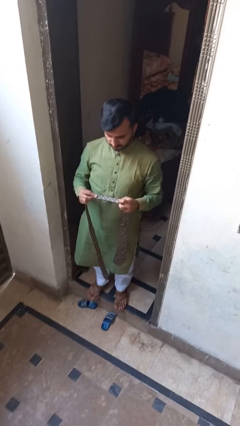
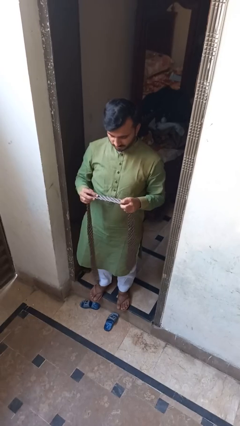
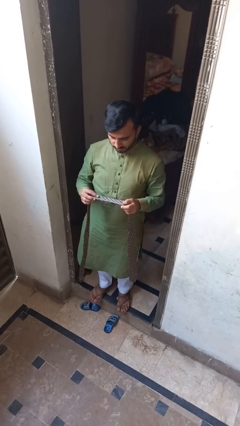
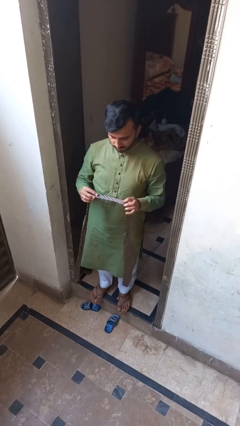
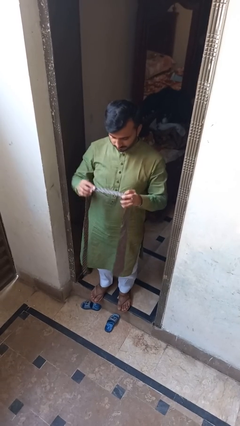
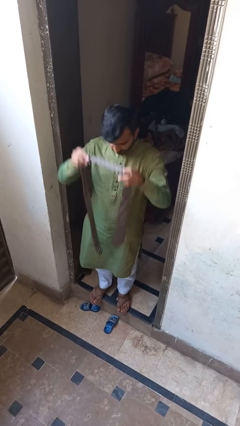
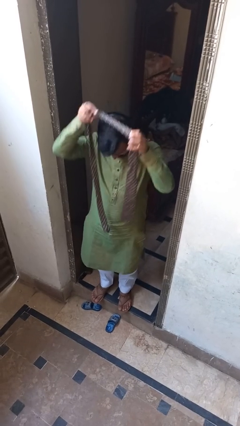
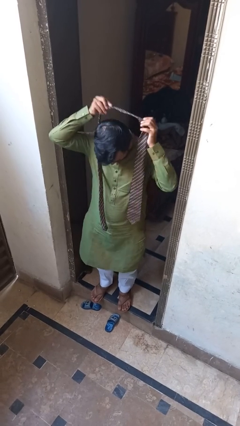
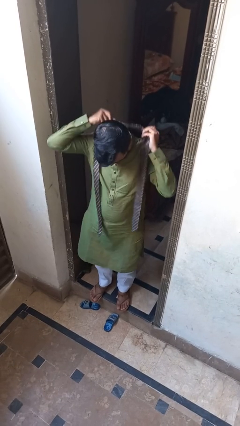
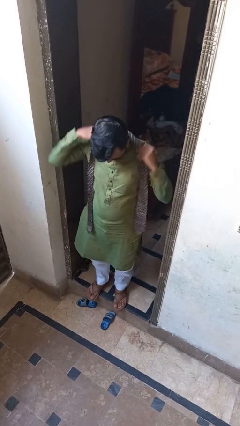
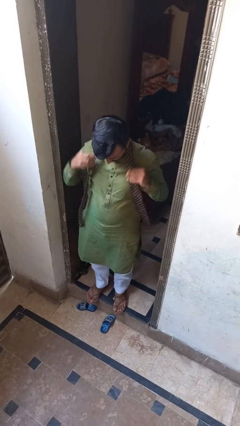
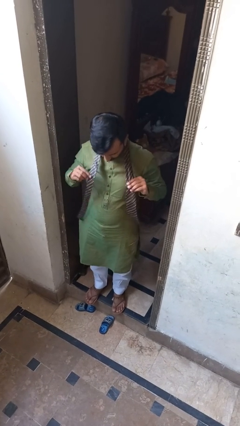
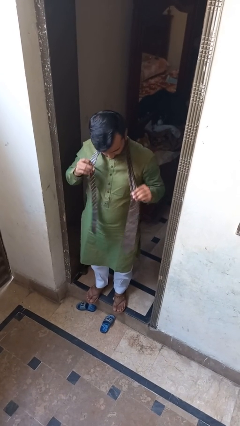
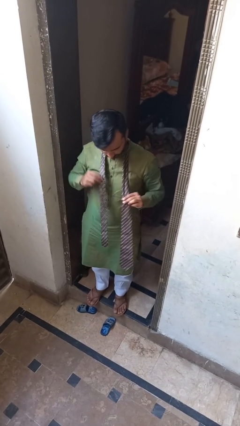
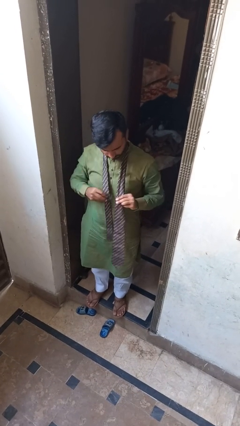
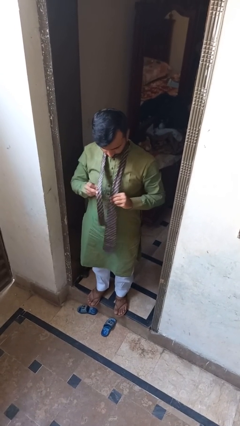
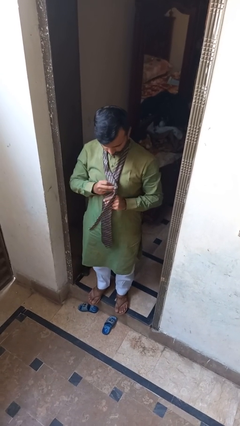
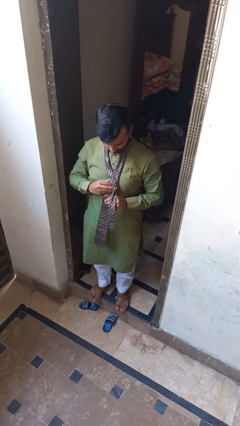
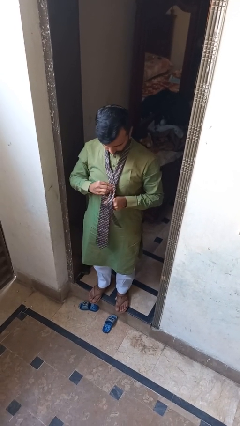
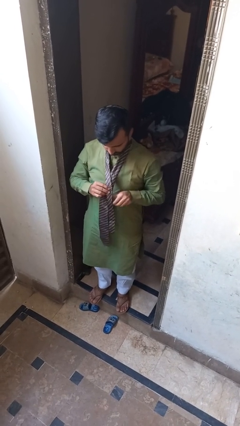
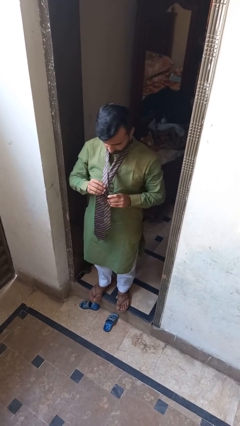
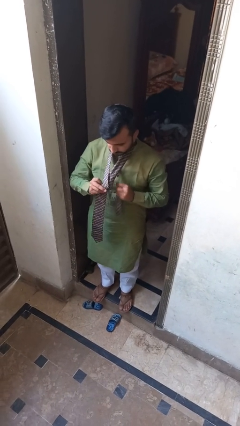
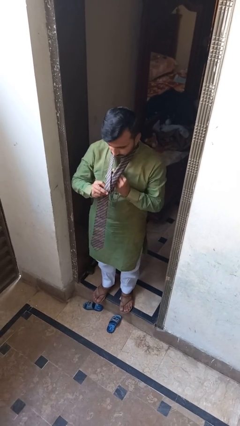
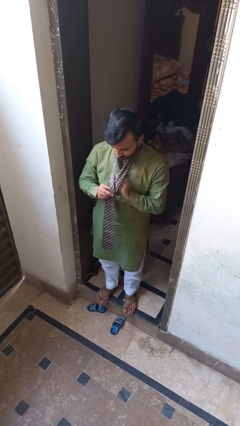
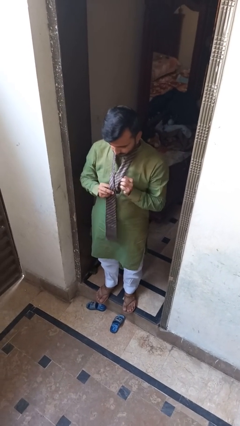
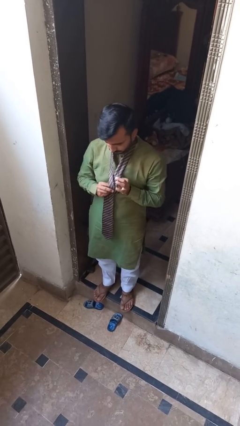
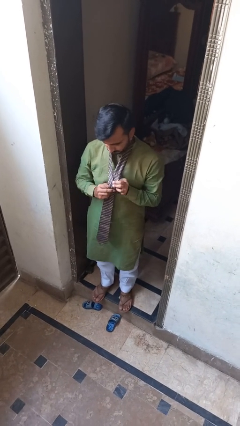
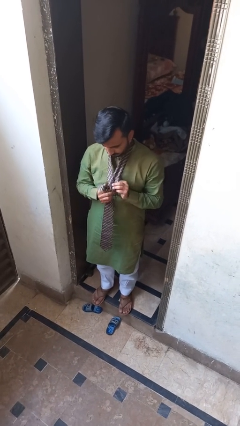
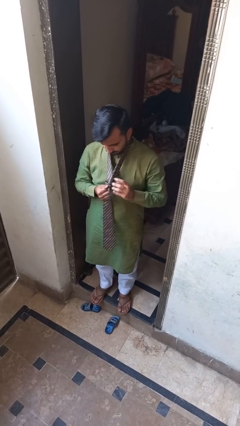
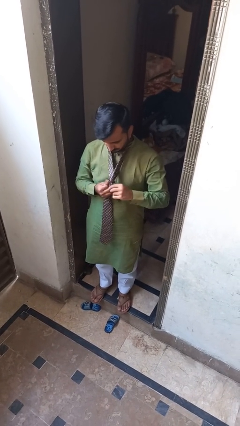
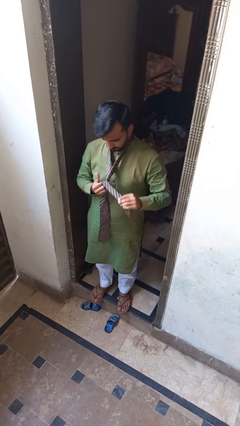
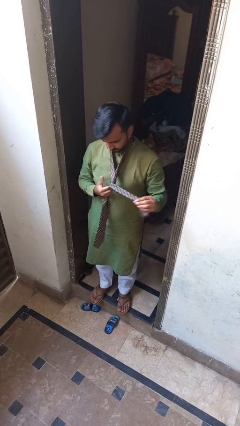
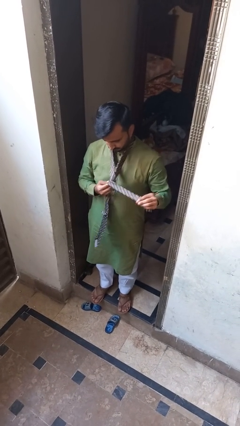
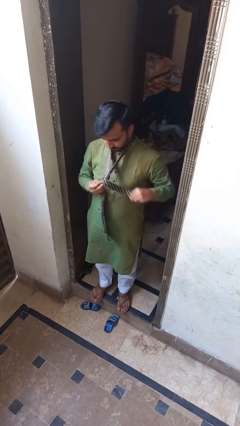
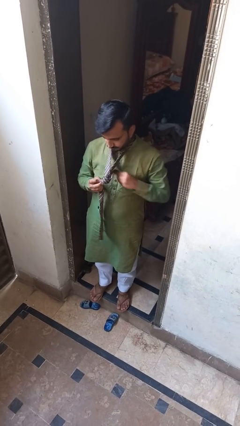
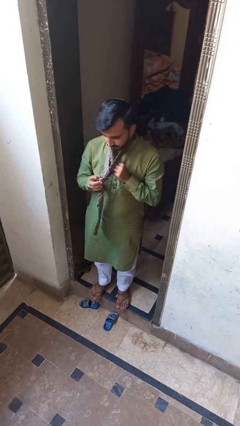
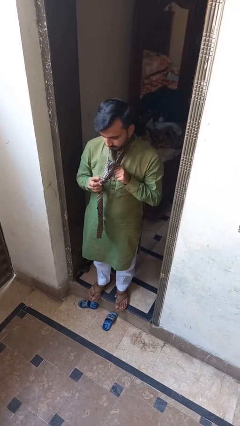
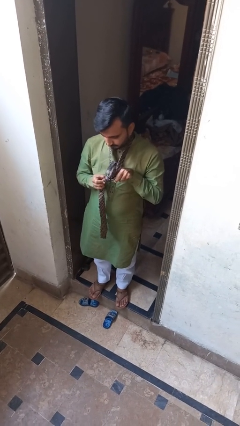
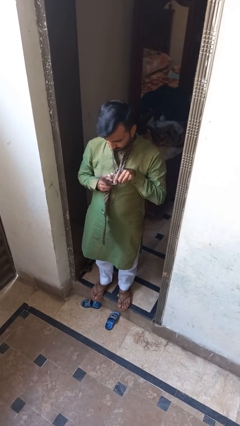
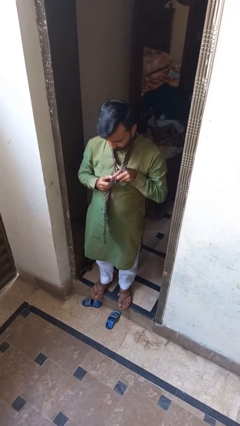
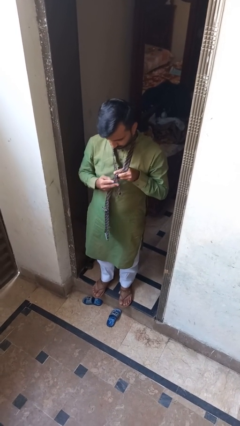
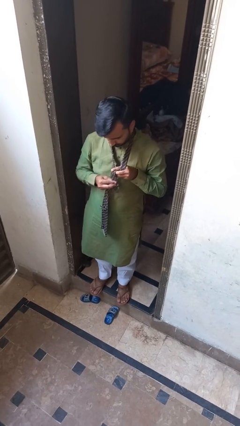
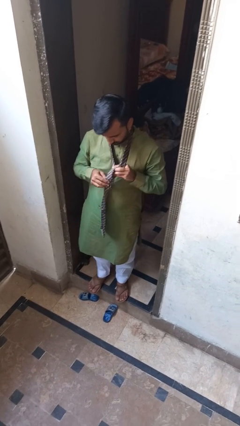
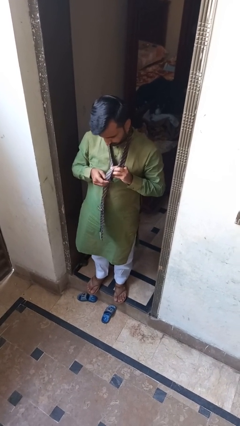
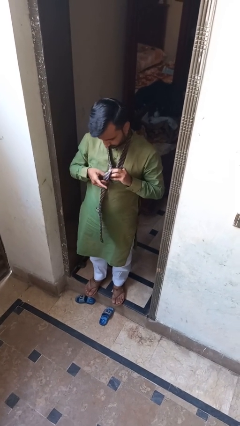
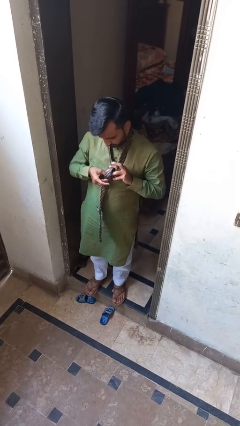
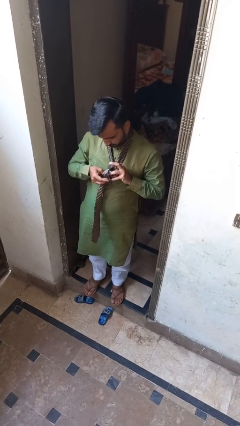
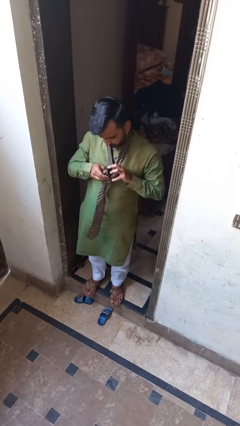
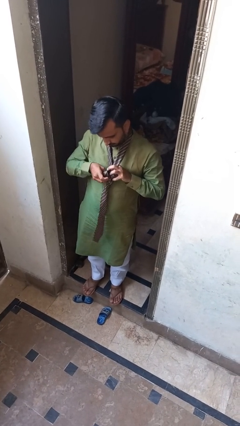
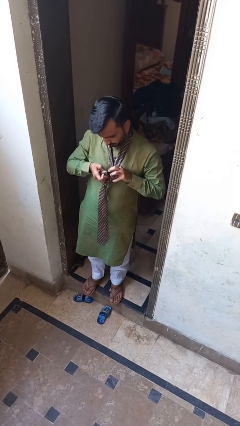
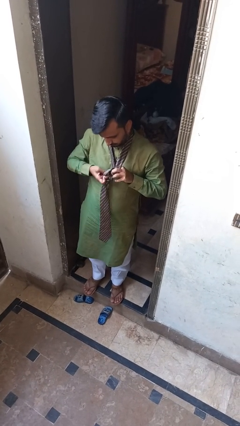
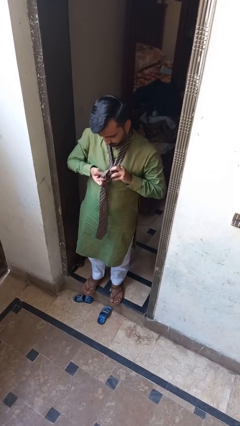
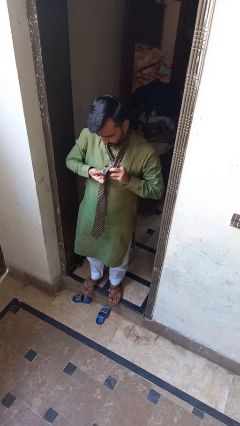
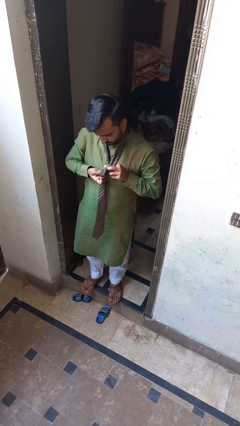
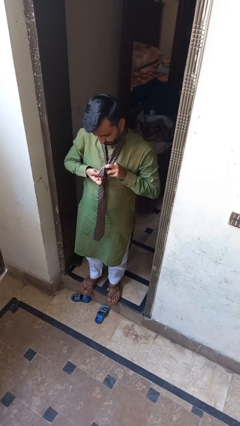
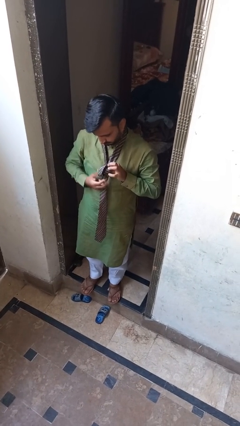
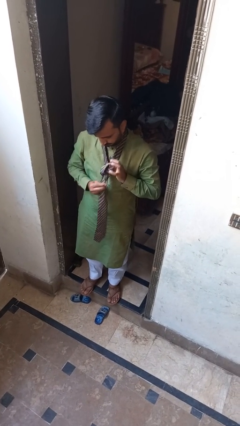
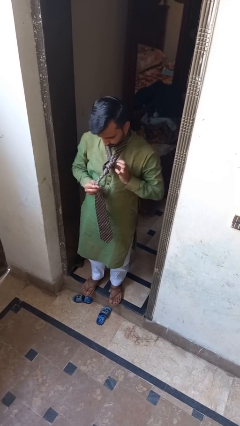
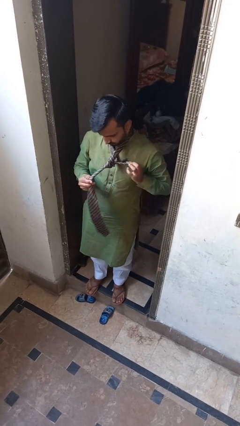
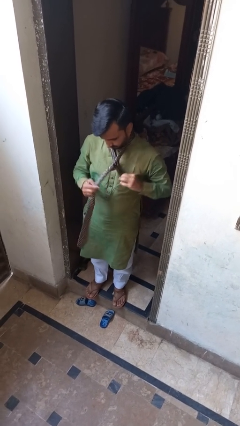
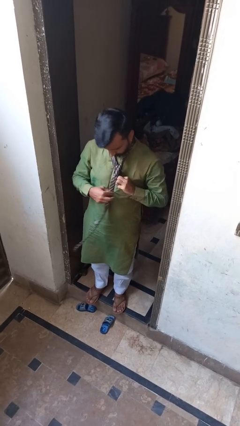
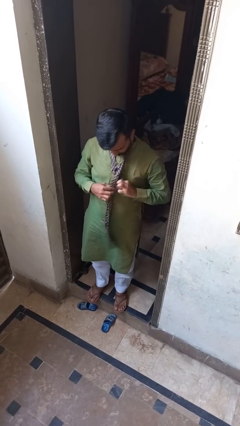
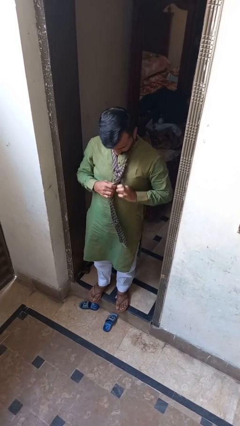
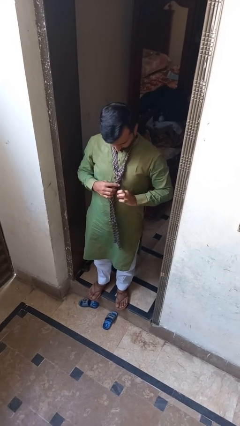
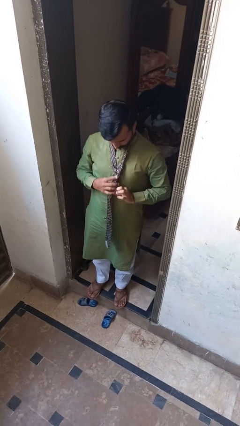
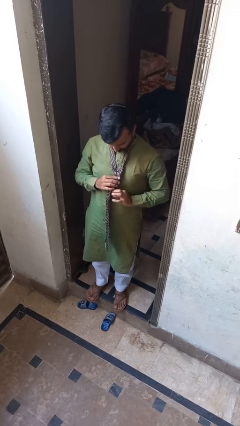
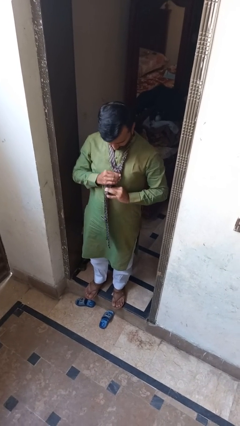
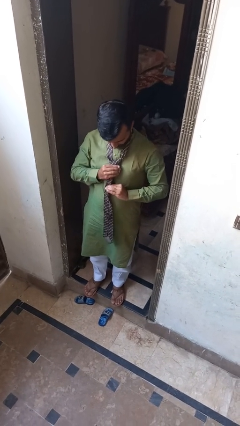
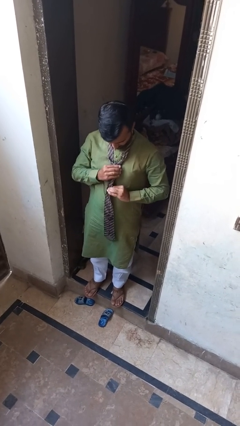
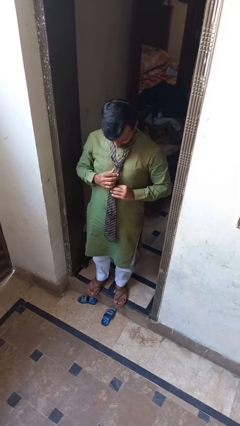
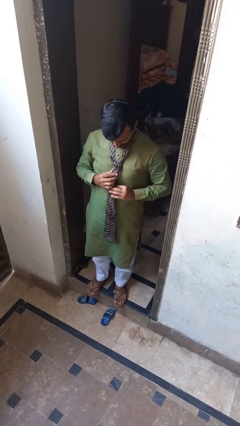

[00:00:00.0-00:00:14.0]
person puts on necktie

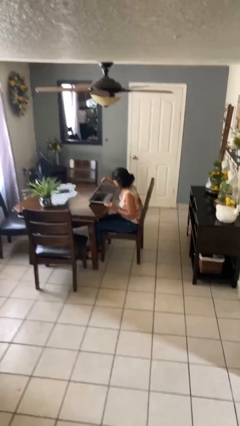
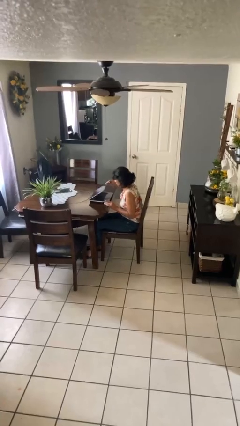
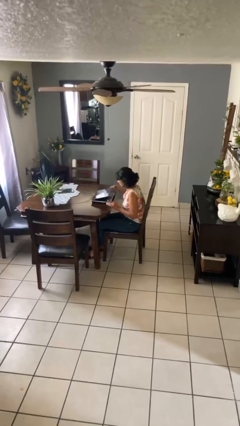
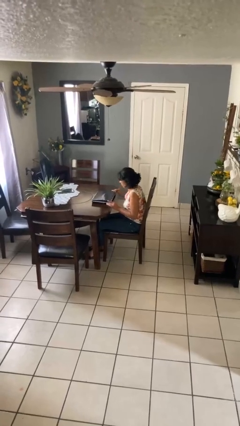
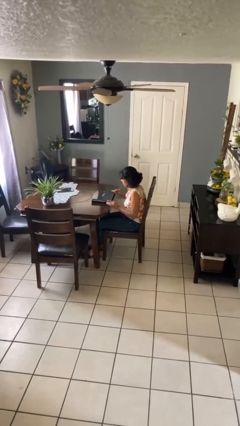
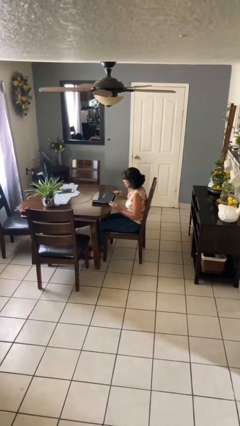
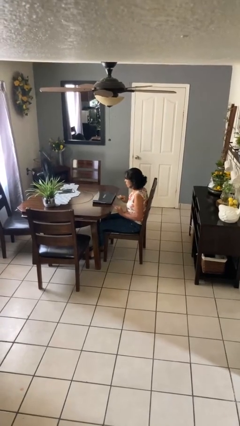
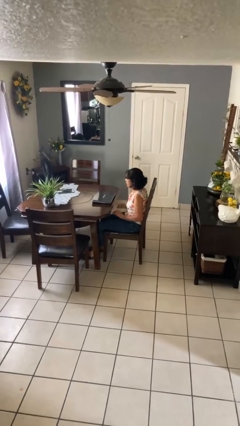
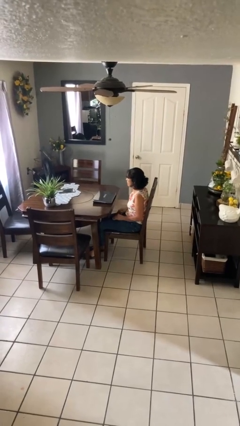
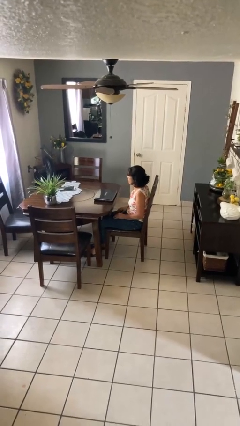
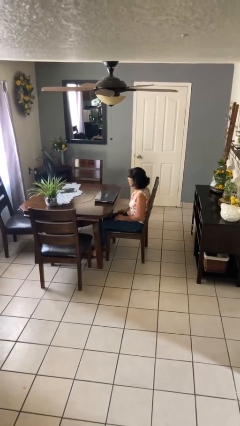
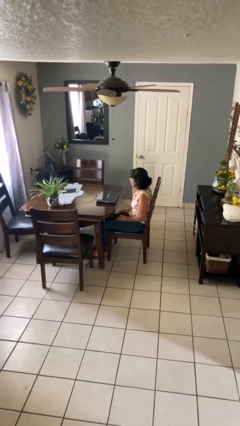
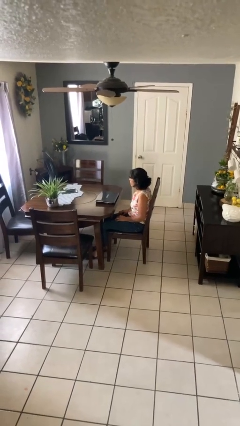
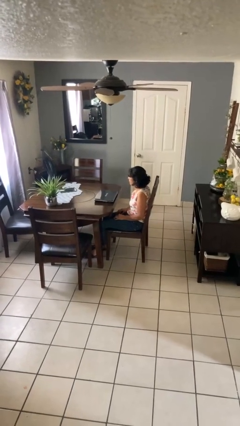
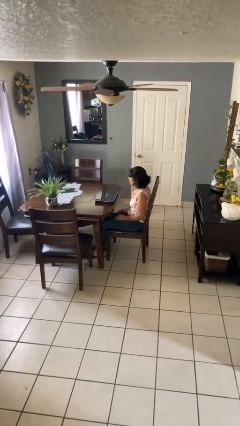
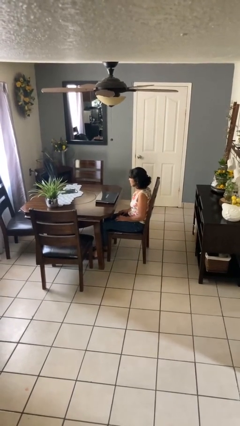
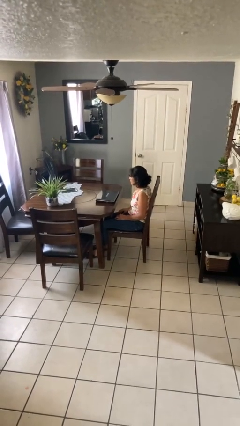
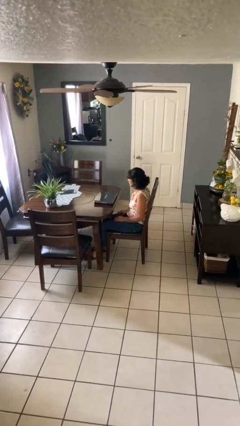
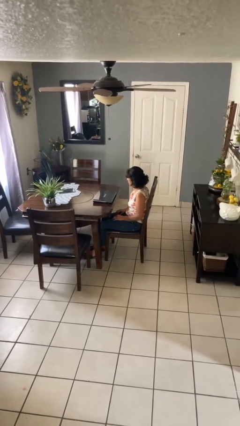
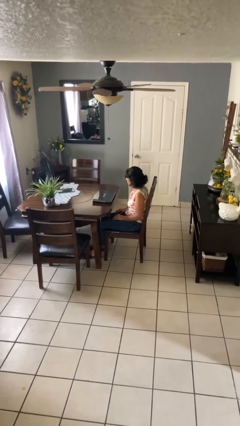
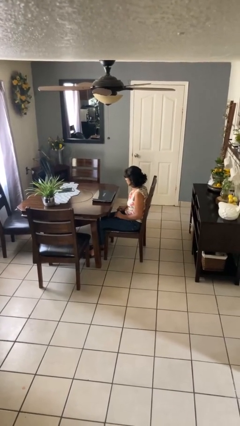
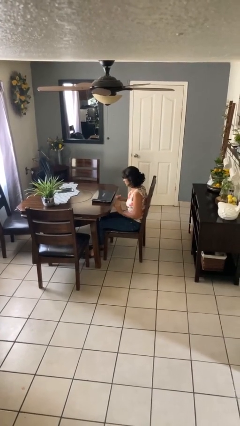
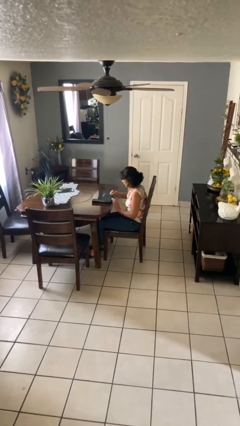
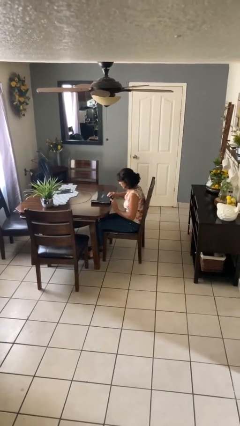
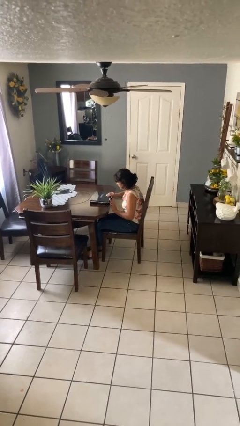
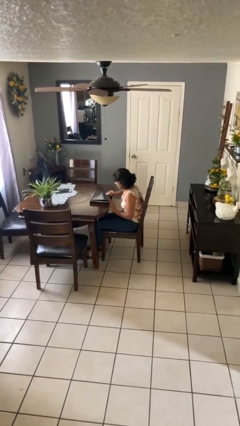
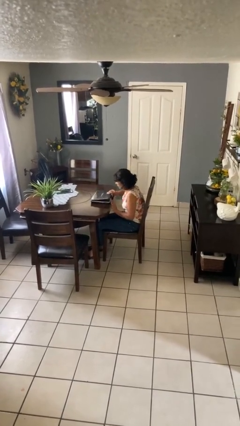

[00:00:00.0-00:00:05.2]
person closes laptop
